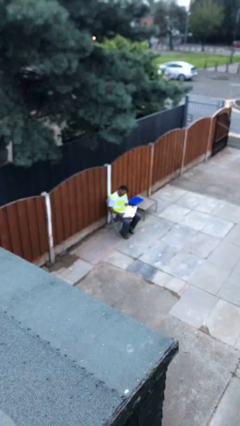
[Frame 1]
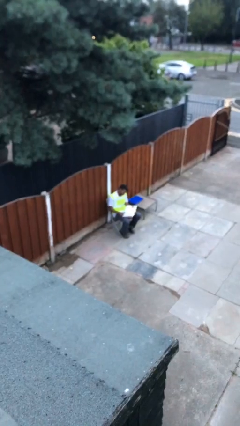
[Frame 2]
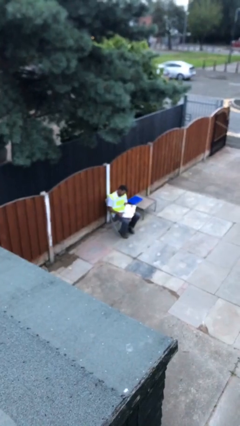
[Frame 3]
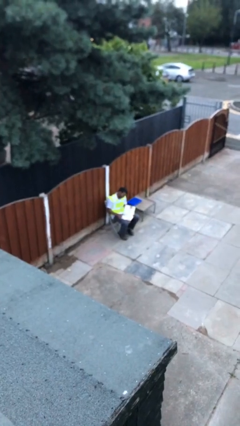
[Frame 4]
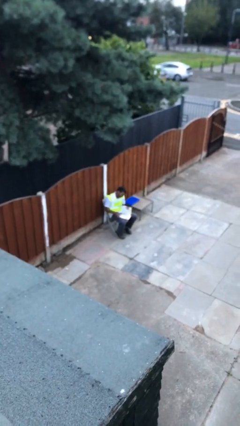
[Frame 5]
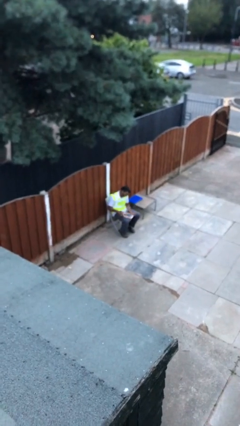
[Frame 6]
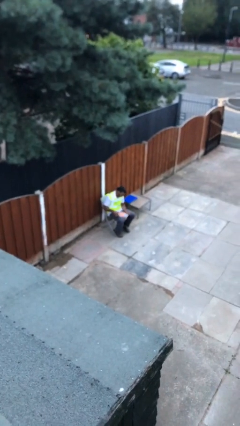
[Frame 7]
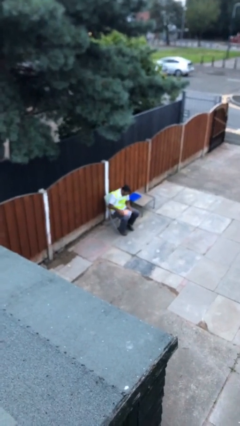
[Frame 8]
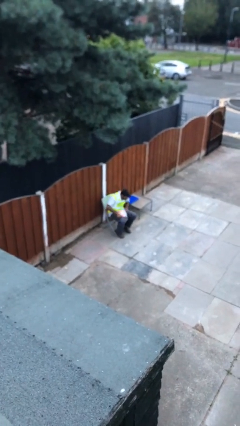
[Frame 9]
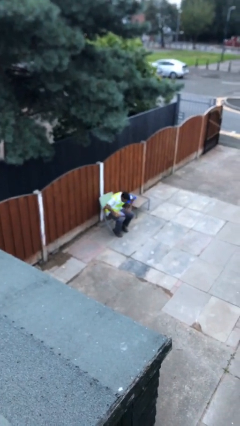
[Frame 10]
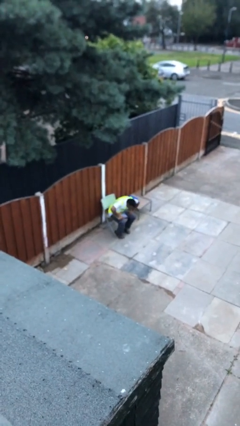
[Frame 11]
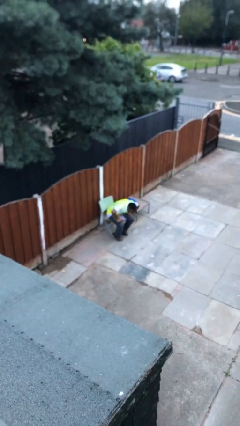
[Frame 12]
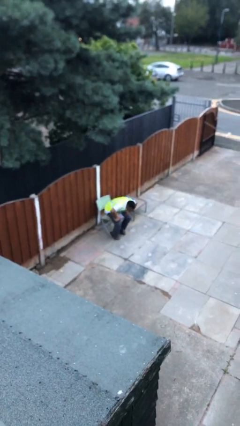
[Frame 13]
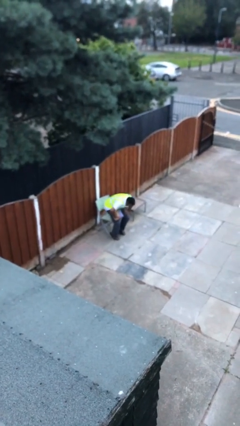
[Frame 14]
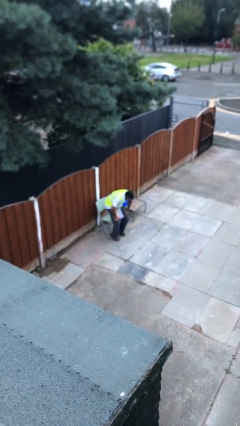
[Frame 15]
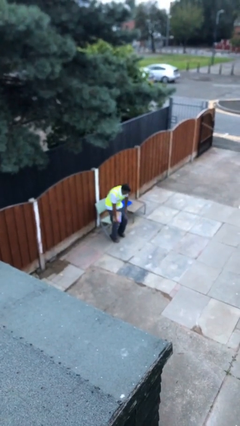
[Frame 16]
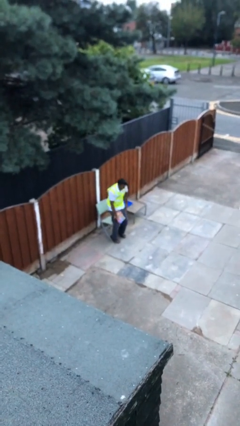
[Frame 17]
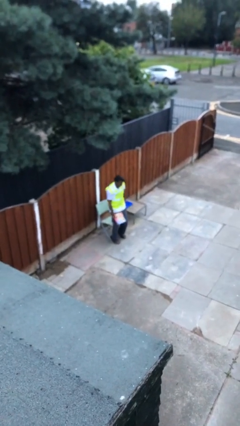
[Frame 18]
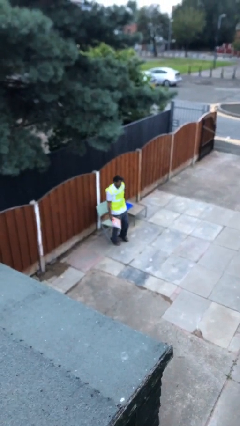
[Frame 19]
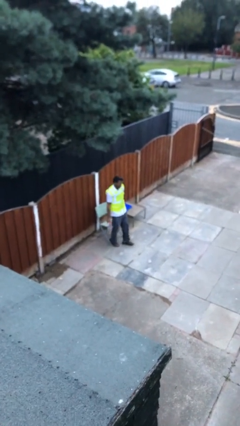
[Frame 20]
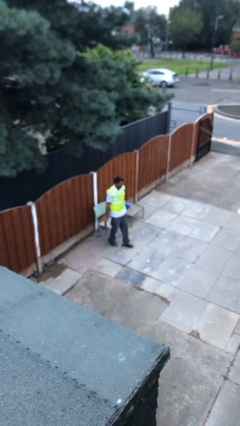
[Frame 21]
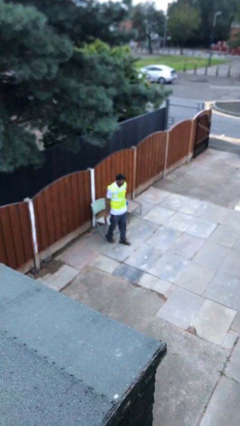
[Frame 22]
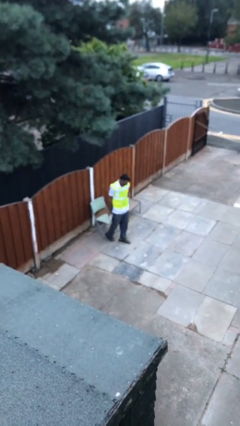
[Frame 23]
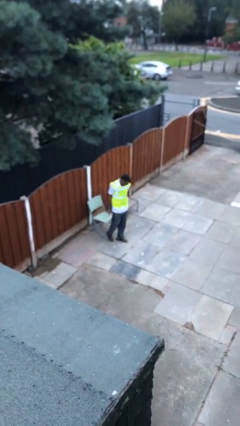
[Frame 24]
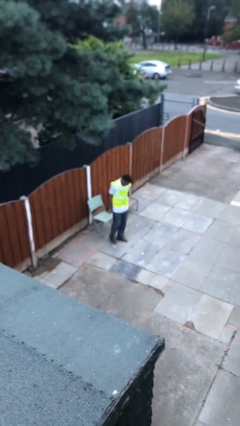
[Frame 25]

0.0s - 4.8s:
person stands up

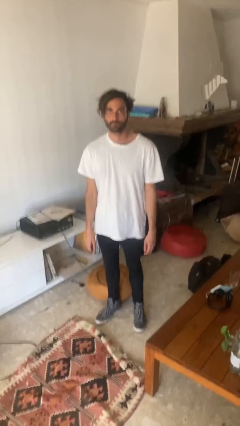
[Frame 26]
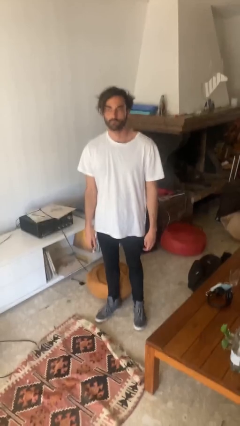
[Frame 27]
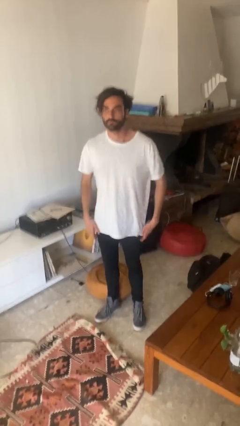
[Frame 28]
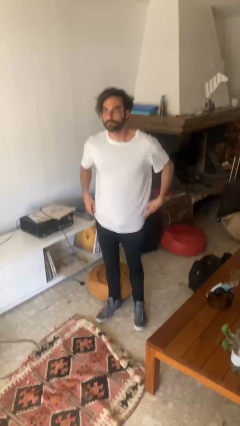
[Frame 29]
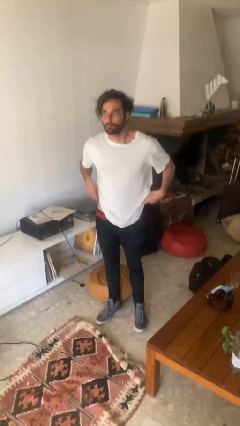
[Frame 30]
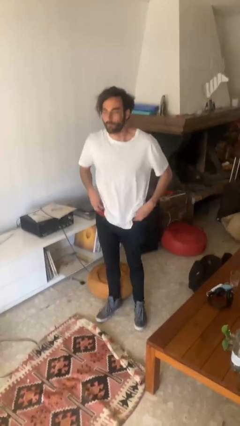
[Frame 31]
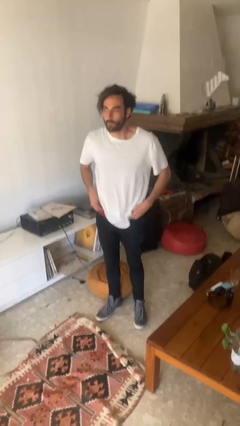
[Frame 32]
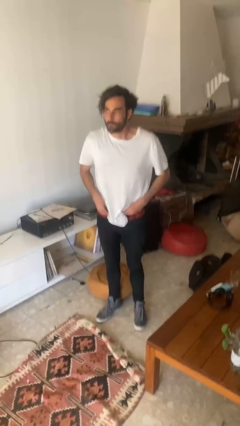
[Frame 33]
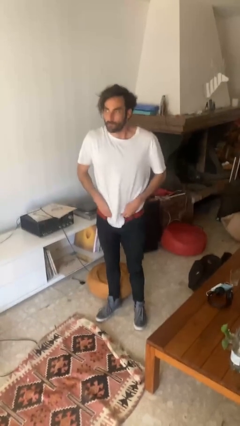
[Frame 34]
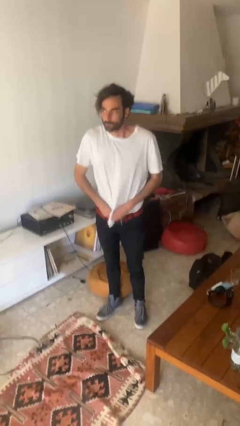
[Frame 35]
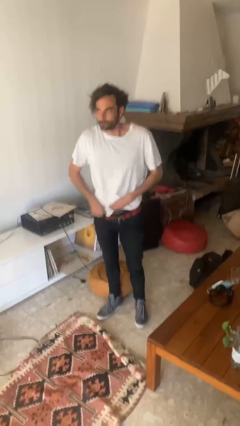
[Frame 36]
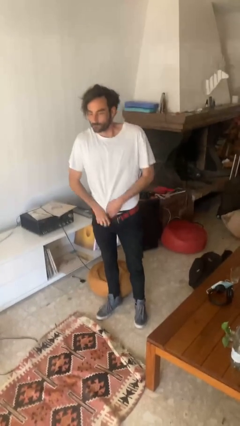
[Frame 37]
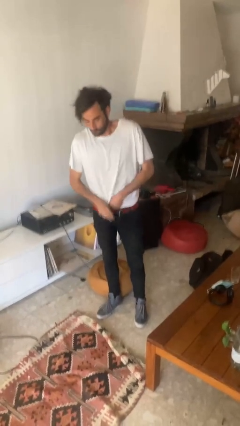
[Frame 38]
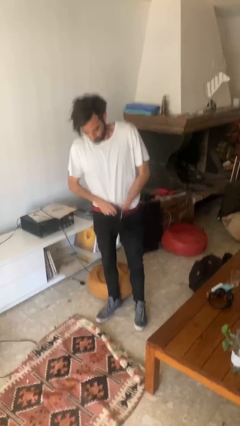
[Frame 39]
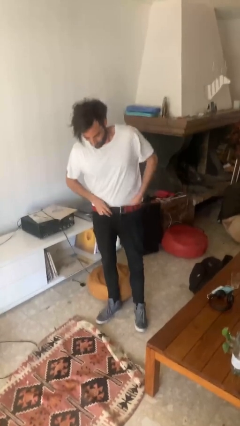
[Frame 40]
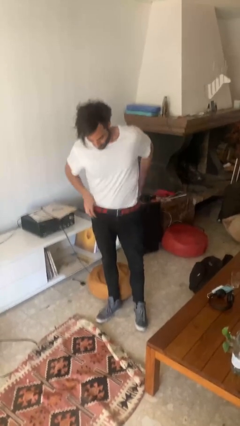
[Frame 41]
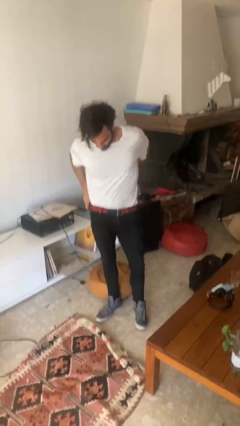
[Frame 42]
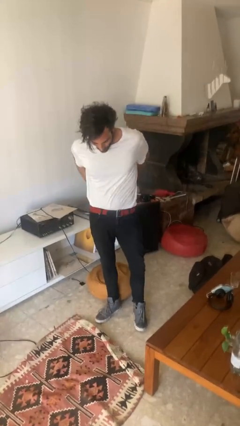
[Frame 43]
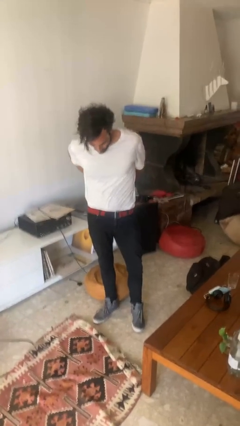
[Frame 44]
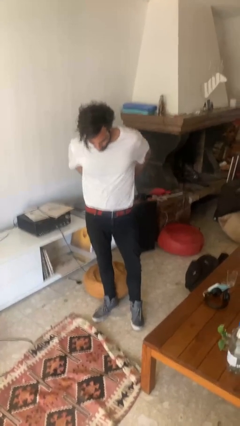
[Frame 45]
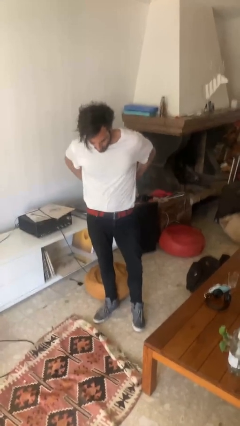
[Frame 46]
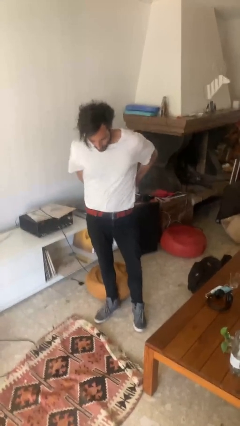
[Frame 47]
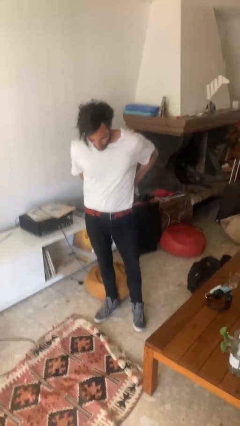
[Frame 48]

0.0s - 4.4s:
person tucks in shirt

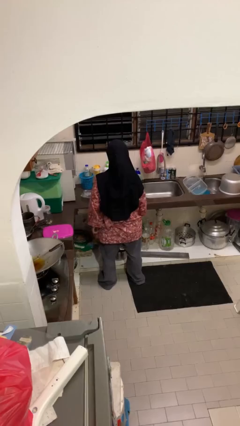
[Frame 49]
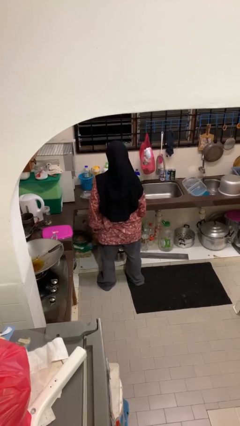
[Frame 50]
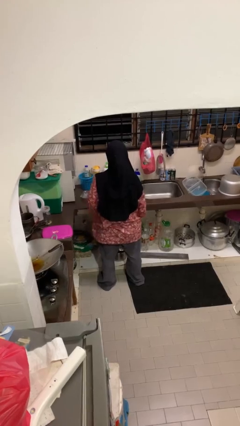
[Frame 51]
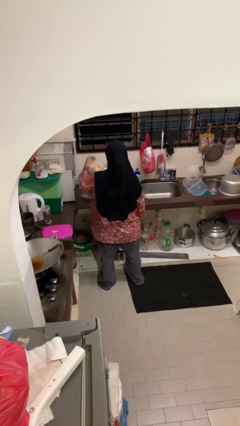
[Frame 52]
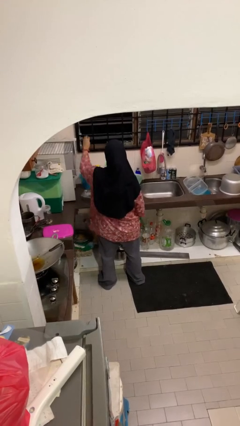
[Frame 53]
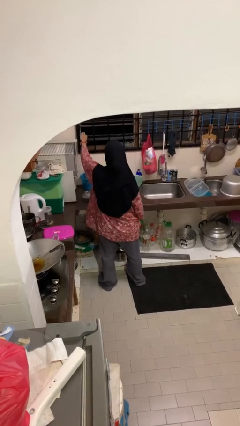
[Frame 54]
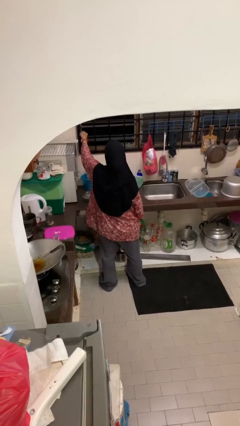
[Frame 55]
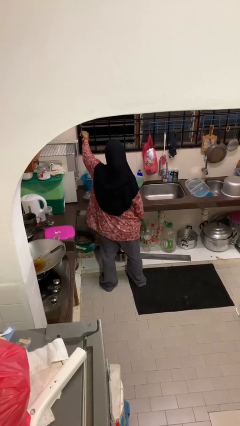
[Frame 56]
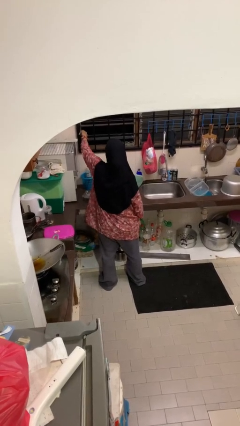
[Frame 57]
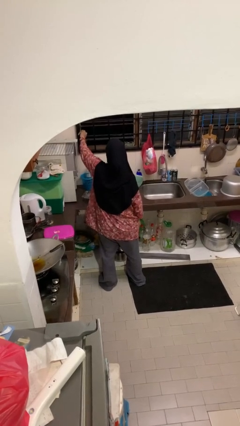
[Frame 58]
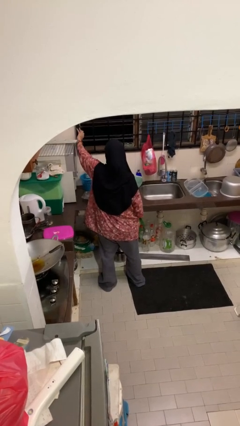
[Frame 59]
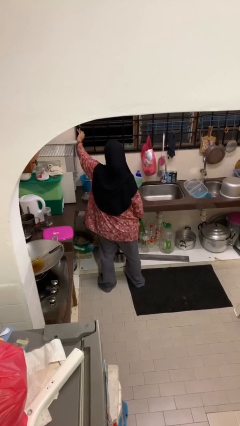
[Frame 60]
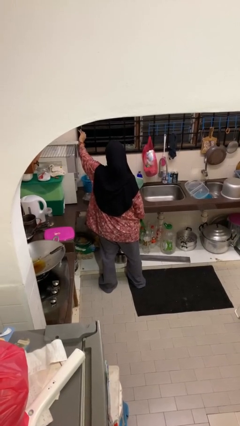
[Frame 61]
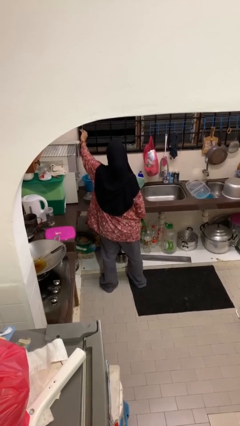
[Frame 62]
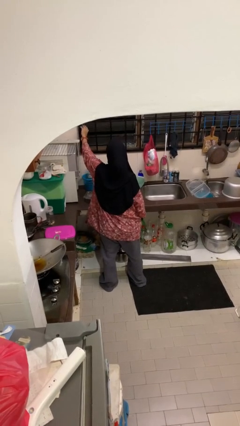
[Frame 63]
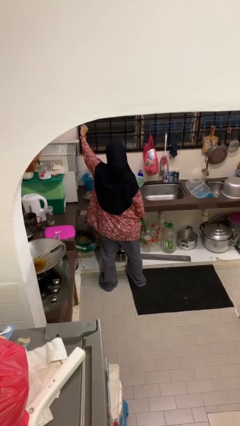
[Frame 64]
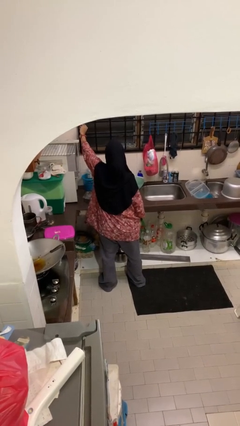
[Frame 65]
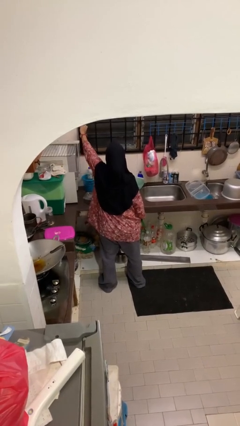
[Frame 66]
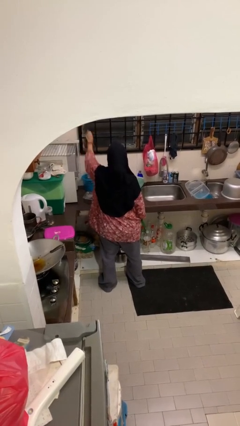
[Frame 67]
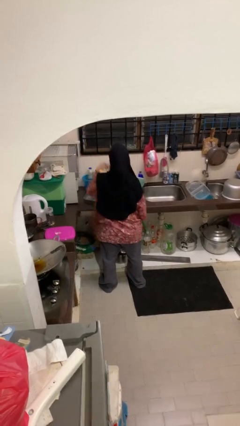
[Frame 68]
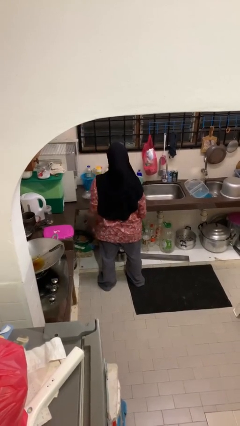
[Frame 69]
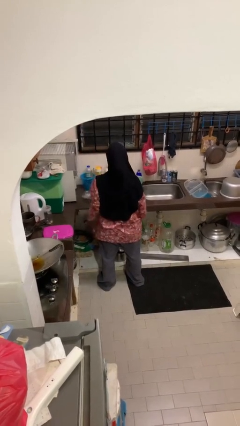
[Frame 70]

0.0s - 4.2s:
person closes home window

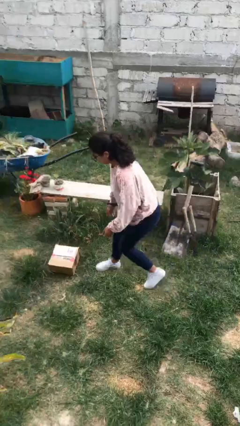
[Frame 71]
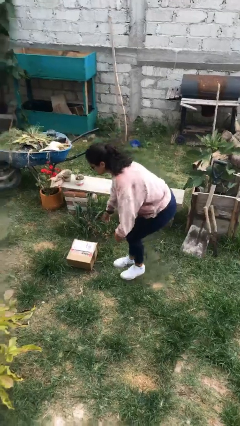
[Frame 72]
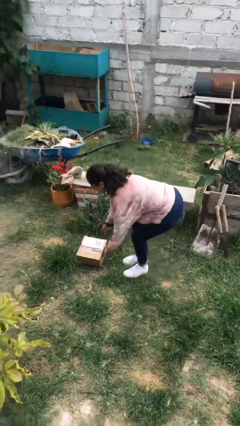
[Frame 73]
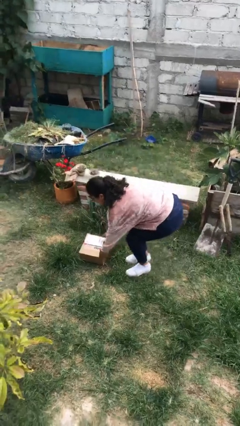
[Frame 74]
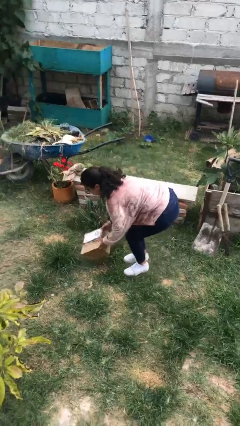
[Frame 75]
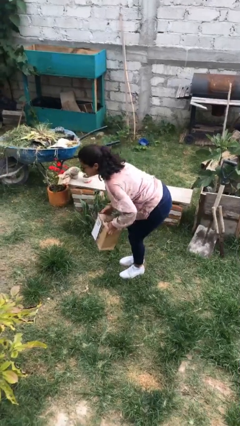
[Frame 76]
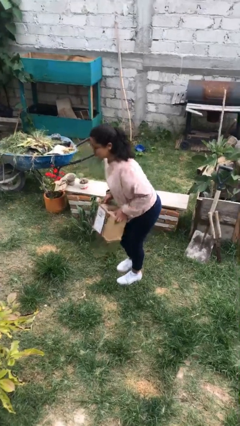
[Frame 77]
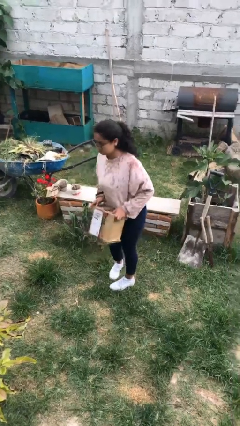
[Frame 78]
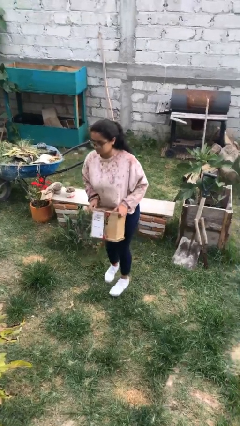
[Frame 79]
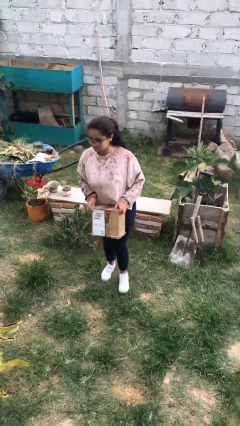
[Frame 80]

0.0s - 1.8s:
person picks up object from floor

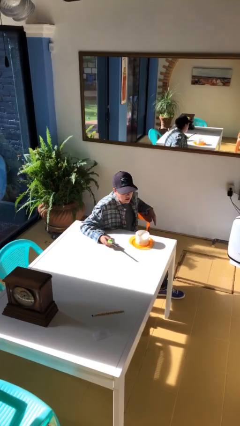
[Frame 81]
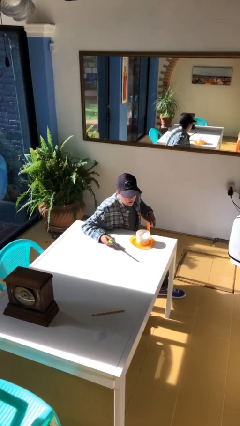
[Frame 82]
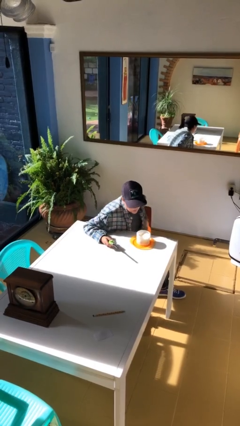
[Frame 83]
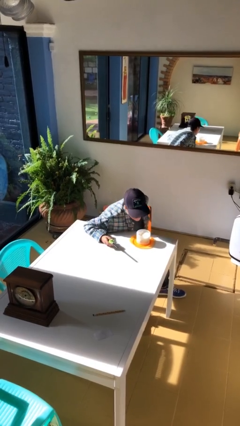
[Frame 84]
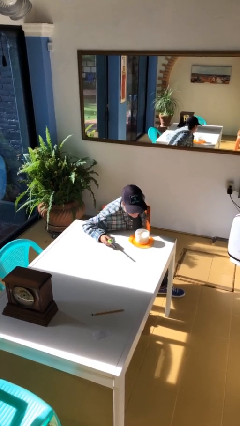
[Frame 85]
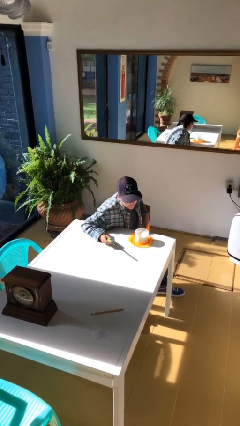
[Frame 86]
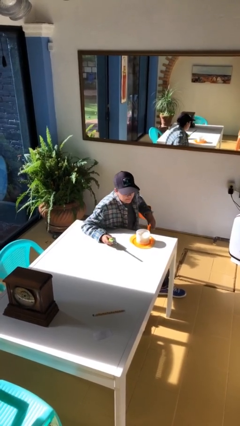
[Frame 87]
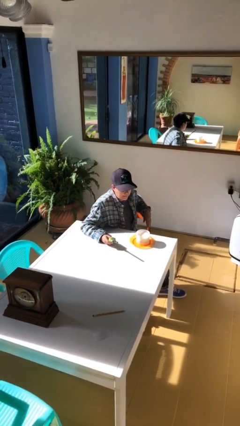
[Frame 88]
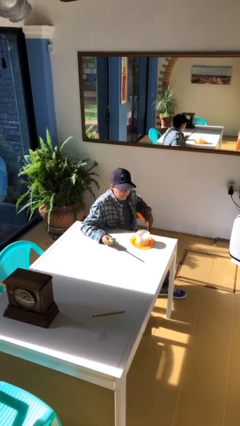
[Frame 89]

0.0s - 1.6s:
person extinguishes candle

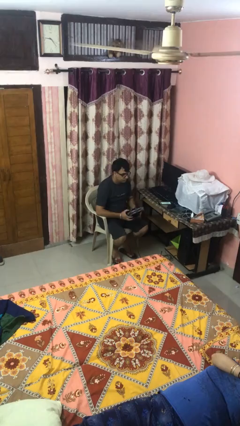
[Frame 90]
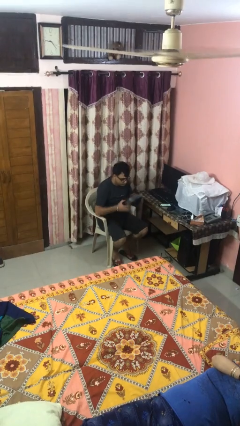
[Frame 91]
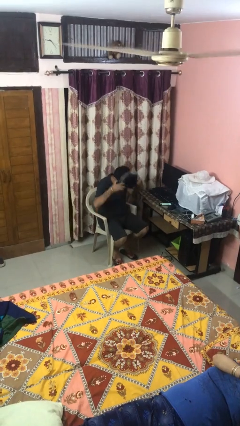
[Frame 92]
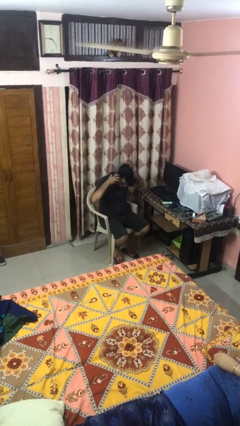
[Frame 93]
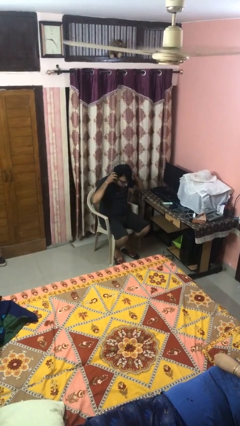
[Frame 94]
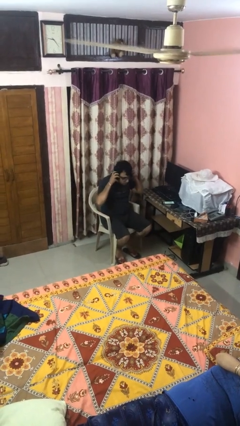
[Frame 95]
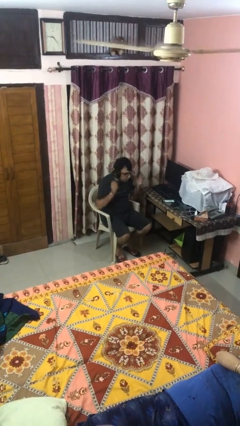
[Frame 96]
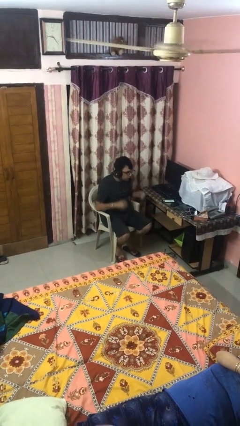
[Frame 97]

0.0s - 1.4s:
person puts on headphones
